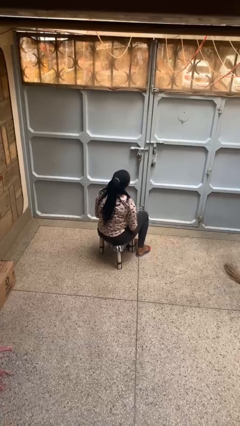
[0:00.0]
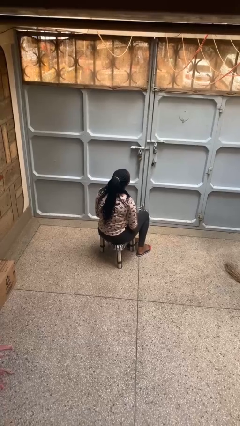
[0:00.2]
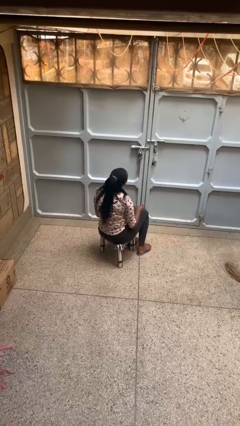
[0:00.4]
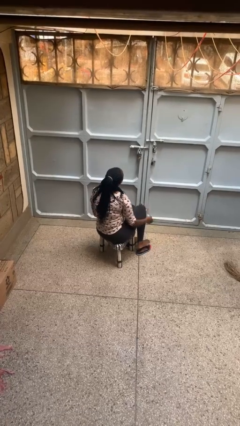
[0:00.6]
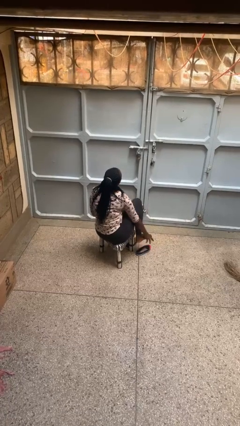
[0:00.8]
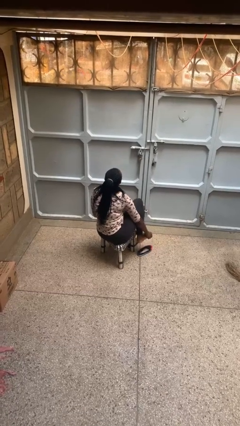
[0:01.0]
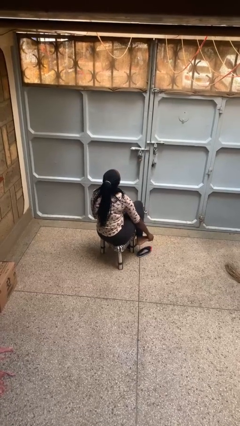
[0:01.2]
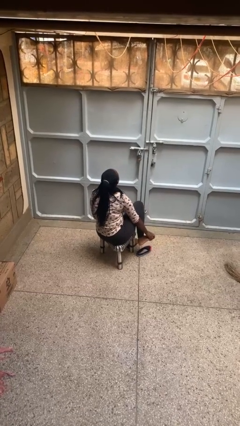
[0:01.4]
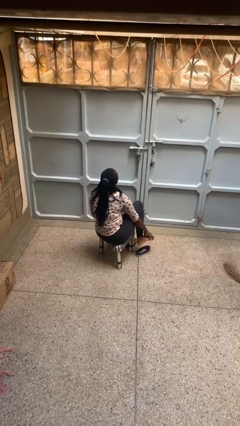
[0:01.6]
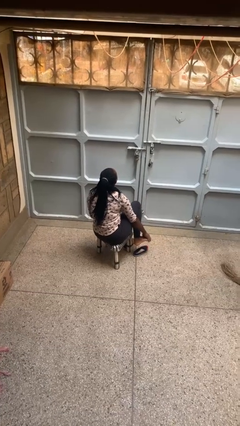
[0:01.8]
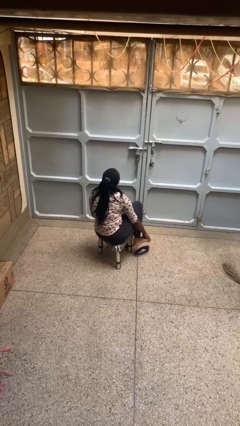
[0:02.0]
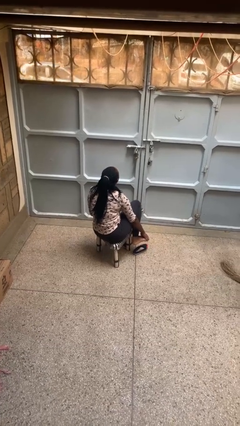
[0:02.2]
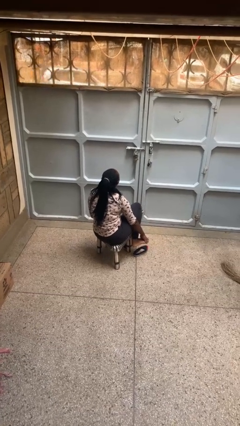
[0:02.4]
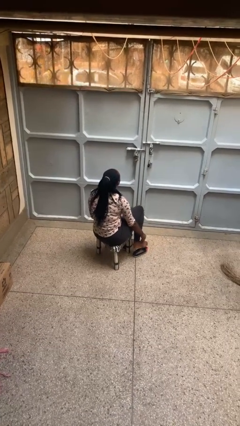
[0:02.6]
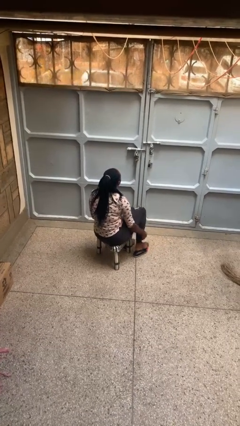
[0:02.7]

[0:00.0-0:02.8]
person rubs foot

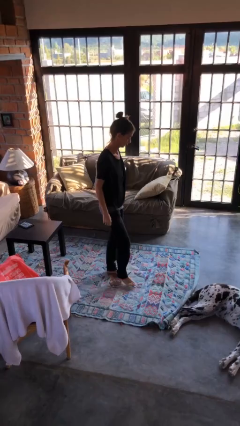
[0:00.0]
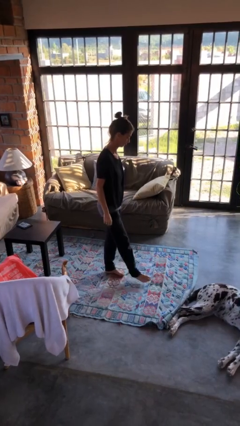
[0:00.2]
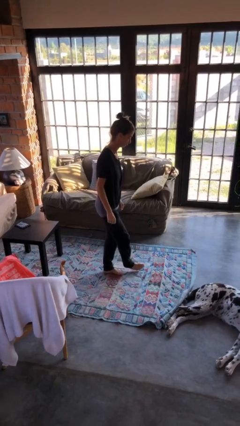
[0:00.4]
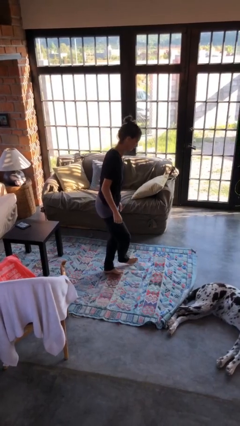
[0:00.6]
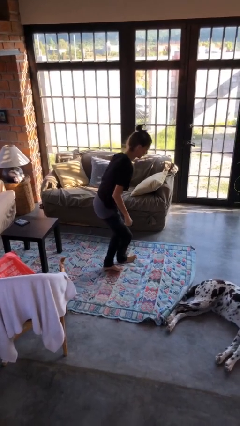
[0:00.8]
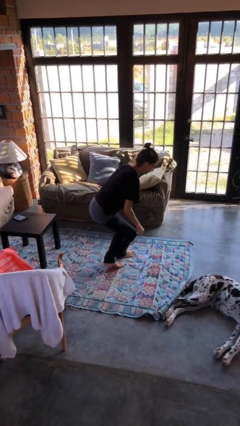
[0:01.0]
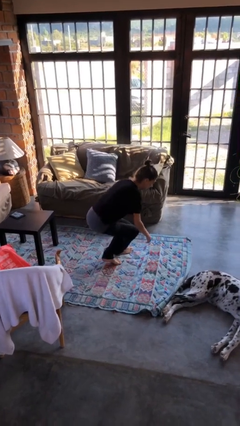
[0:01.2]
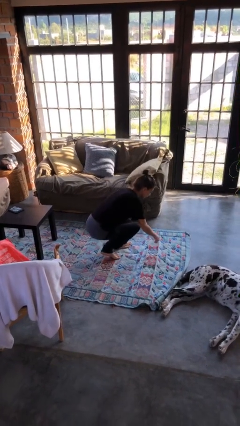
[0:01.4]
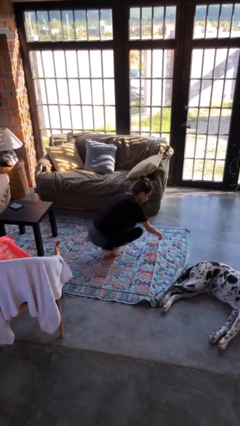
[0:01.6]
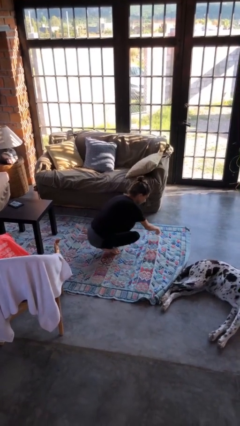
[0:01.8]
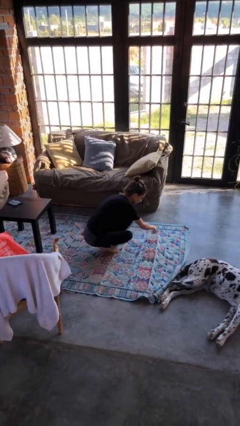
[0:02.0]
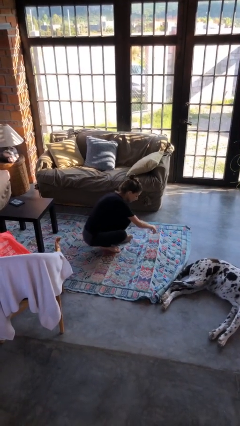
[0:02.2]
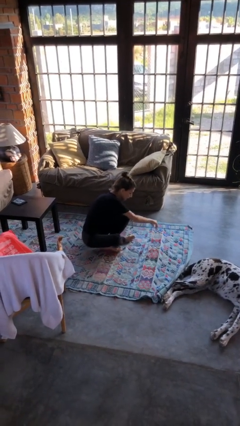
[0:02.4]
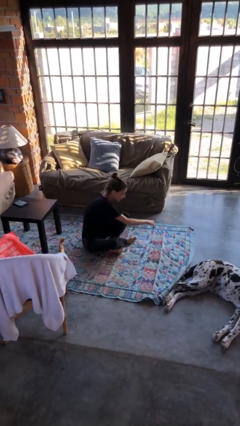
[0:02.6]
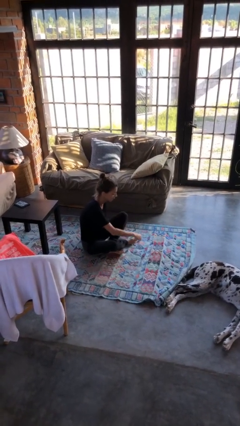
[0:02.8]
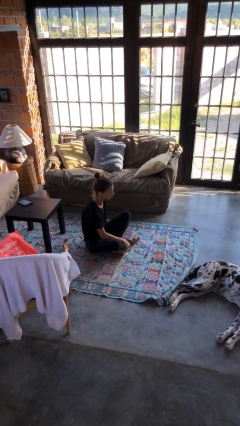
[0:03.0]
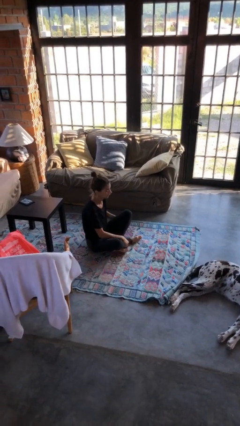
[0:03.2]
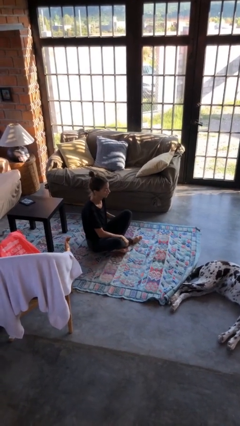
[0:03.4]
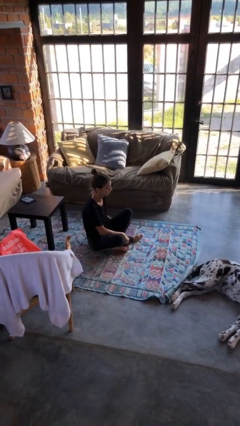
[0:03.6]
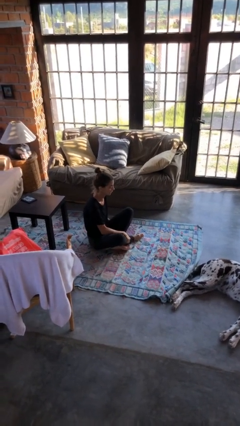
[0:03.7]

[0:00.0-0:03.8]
person sits crisscross

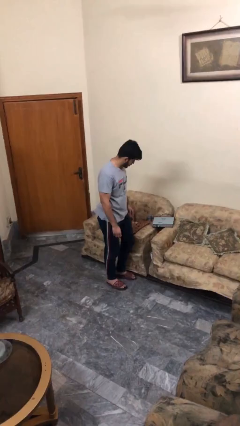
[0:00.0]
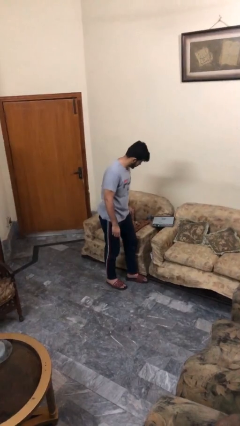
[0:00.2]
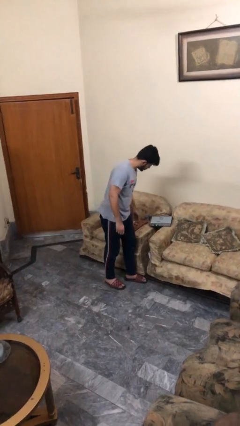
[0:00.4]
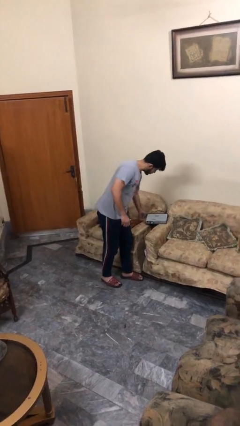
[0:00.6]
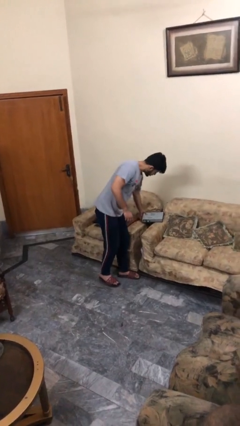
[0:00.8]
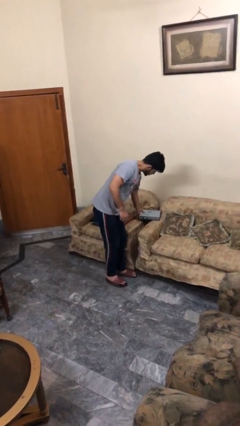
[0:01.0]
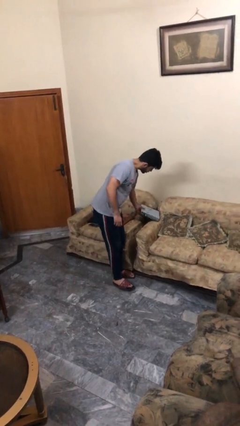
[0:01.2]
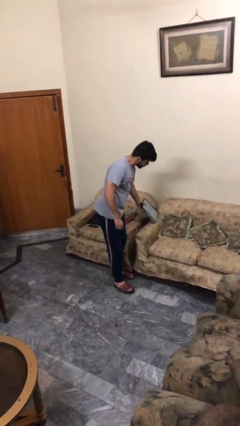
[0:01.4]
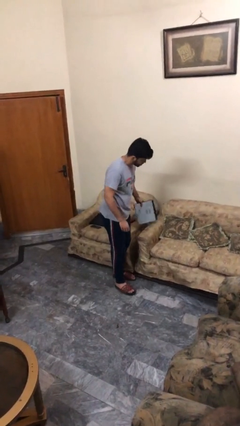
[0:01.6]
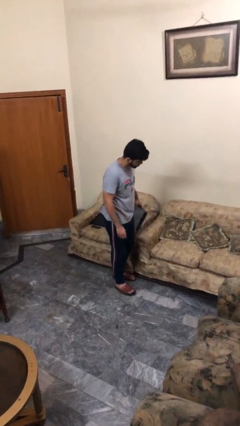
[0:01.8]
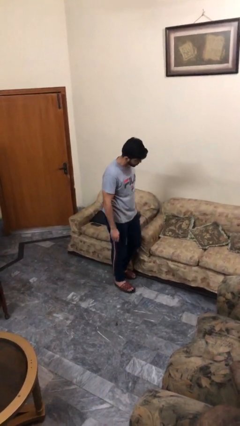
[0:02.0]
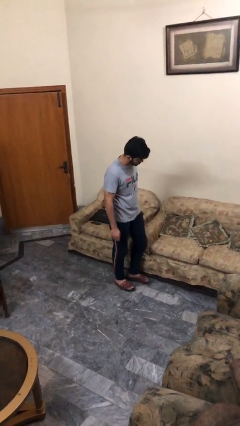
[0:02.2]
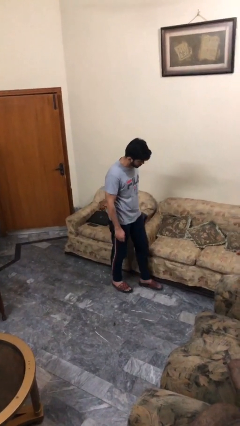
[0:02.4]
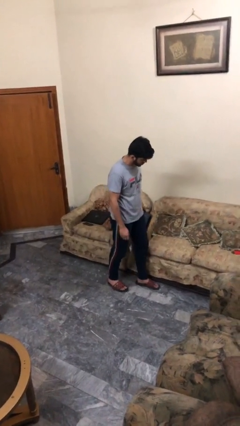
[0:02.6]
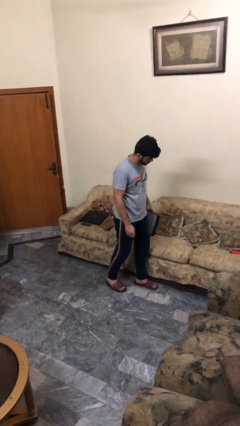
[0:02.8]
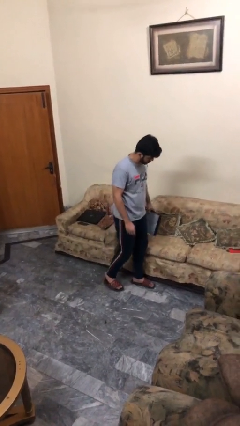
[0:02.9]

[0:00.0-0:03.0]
person picks up object from couch

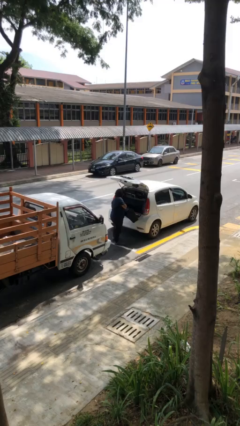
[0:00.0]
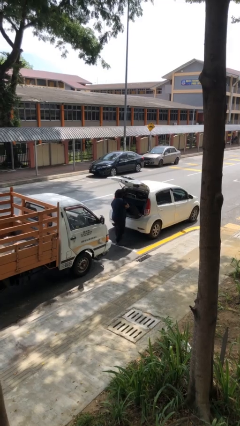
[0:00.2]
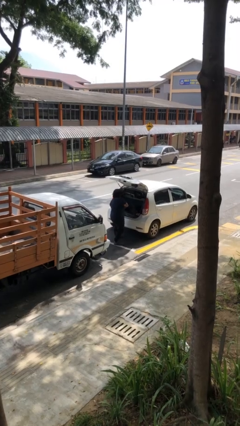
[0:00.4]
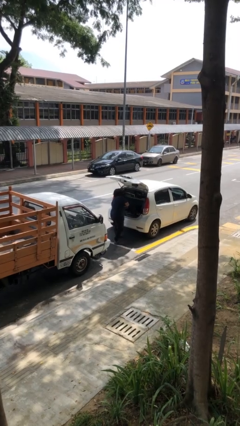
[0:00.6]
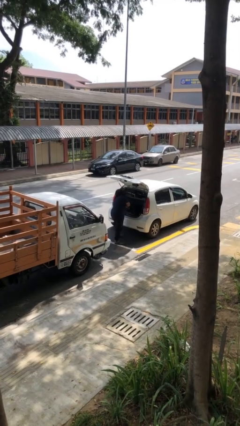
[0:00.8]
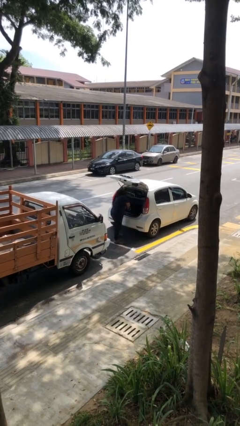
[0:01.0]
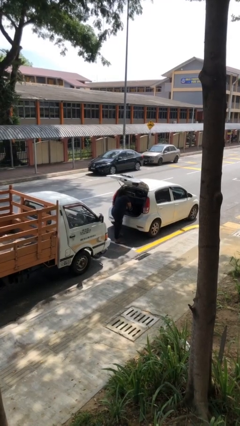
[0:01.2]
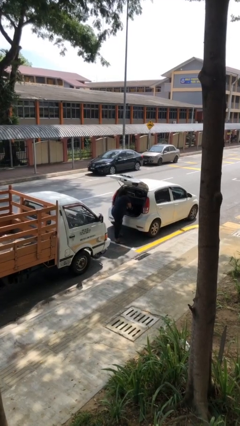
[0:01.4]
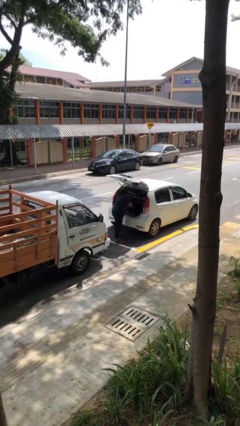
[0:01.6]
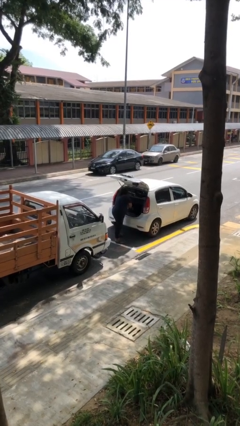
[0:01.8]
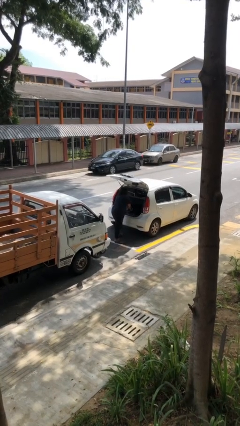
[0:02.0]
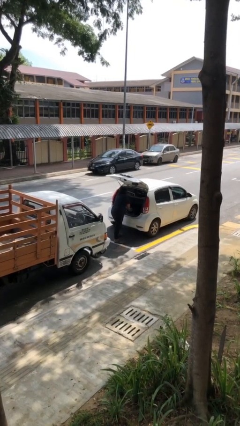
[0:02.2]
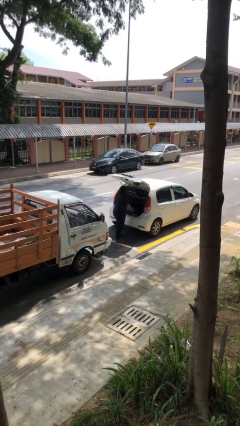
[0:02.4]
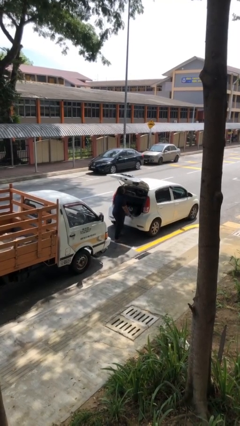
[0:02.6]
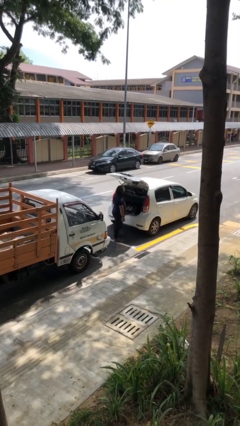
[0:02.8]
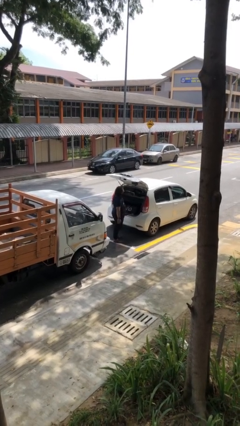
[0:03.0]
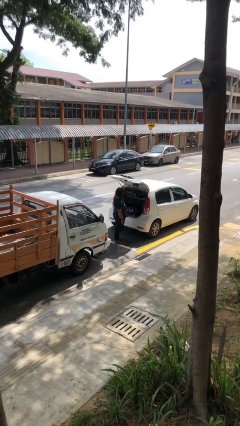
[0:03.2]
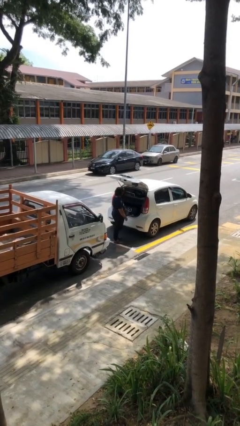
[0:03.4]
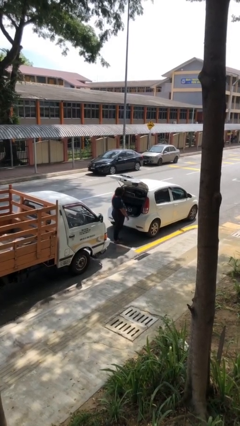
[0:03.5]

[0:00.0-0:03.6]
person loads car

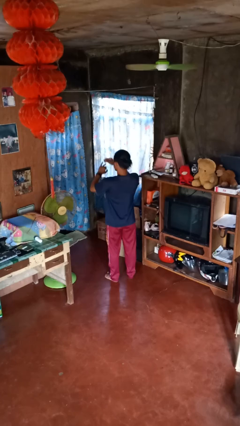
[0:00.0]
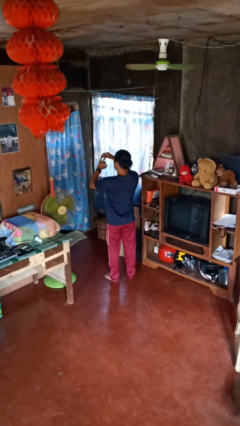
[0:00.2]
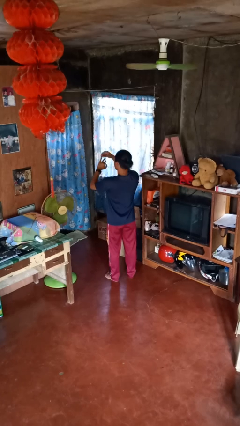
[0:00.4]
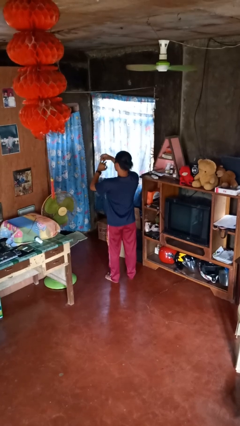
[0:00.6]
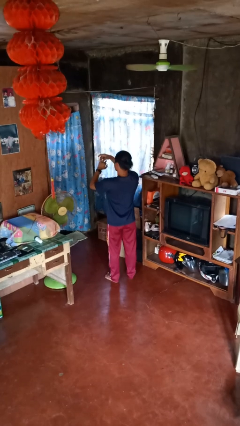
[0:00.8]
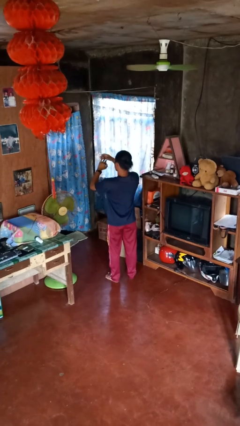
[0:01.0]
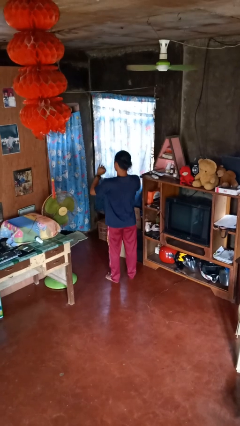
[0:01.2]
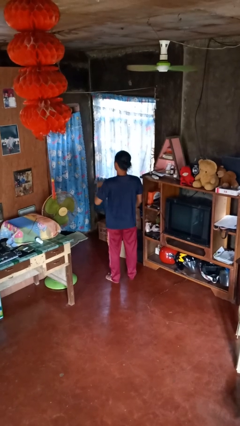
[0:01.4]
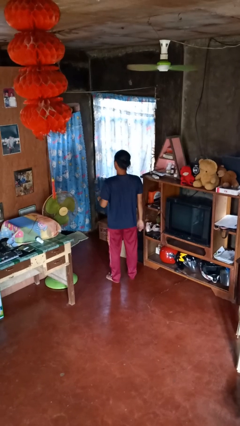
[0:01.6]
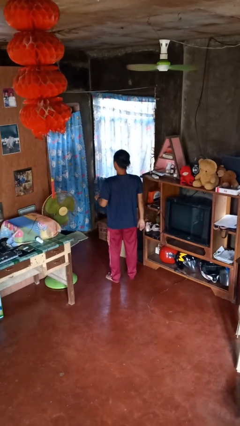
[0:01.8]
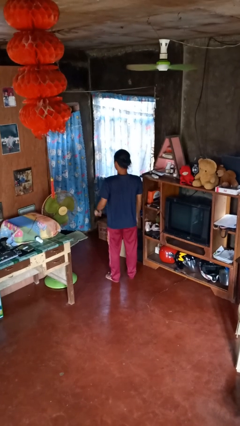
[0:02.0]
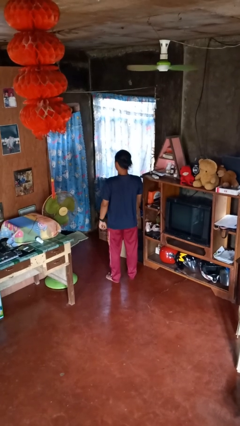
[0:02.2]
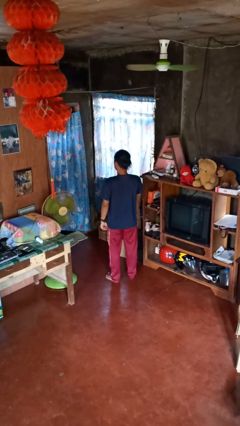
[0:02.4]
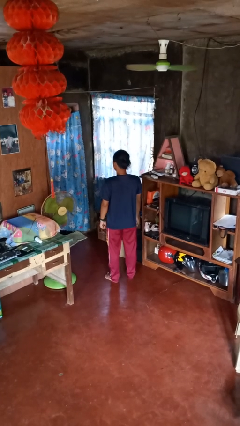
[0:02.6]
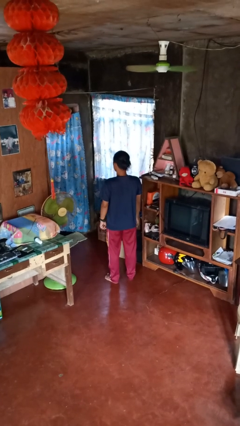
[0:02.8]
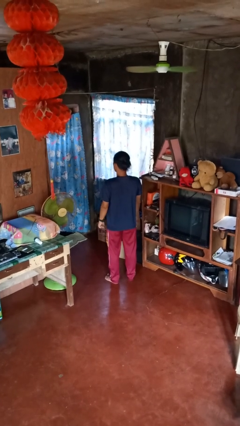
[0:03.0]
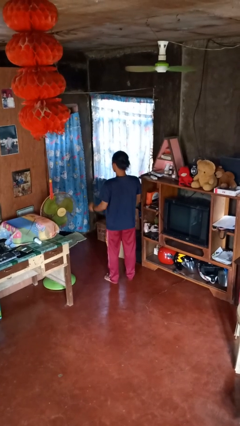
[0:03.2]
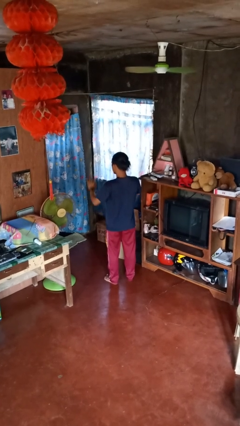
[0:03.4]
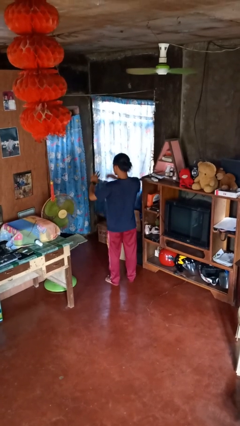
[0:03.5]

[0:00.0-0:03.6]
person puts on ring

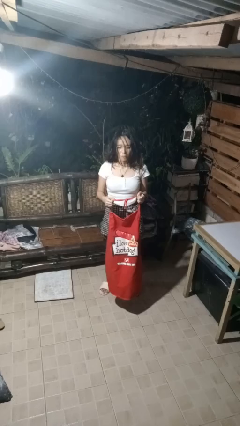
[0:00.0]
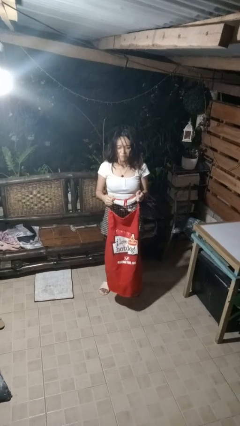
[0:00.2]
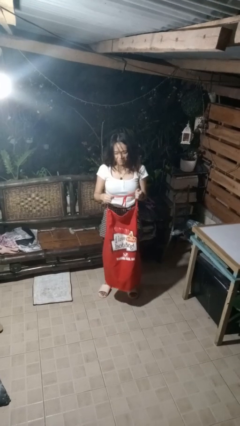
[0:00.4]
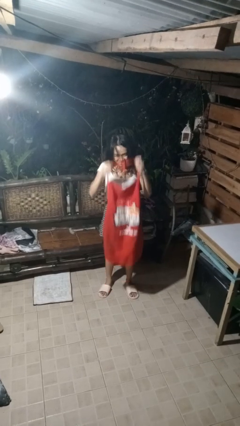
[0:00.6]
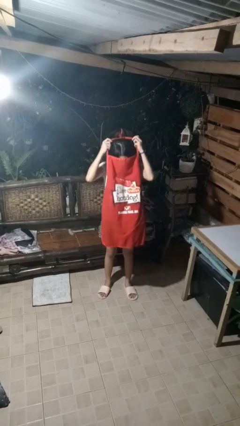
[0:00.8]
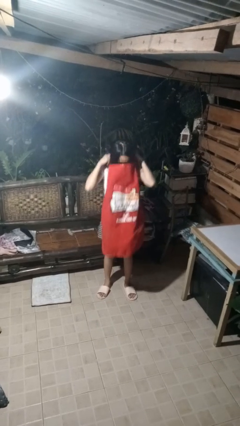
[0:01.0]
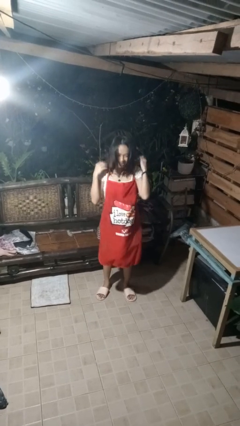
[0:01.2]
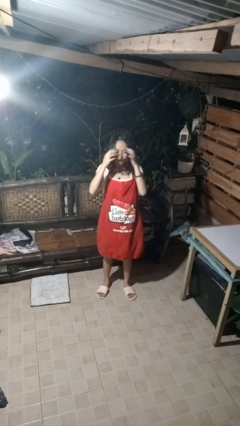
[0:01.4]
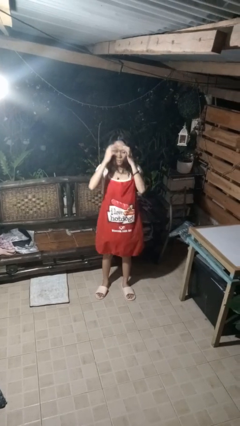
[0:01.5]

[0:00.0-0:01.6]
person puts on apron
